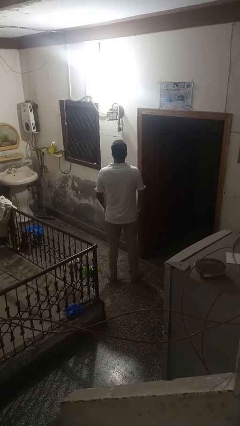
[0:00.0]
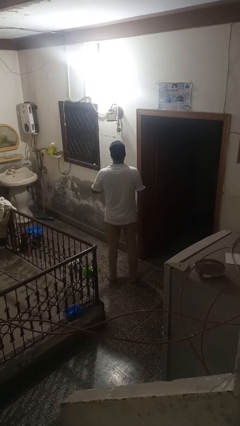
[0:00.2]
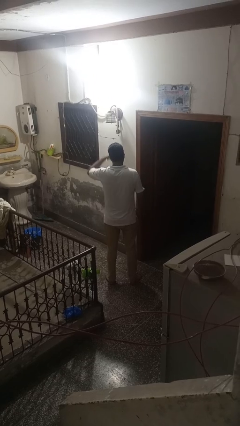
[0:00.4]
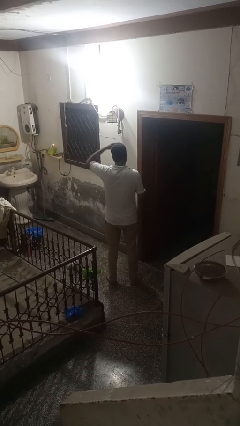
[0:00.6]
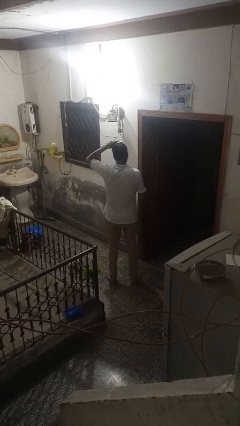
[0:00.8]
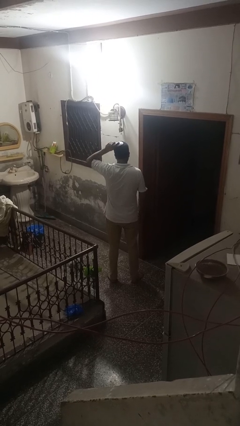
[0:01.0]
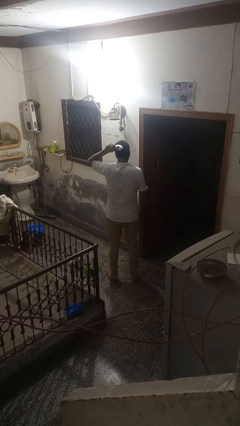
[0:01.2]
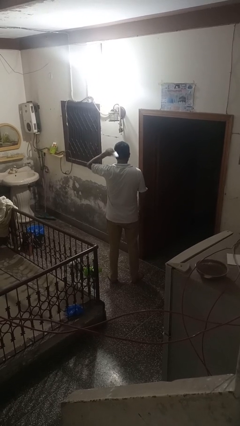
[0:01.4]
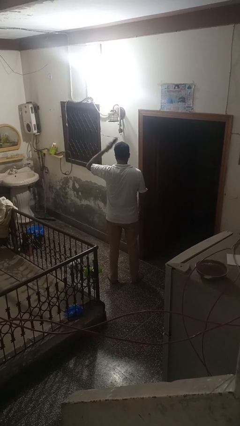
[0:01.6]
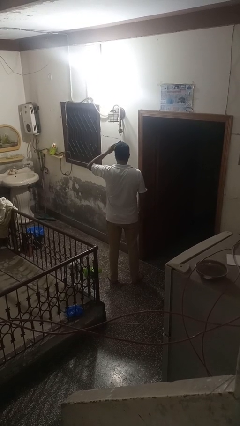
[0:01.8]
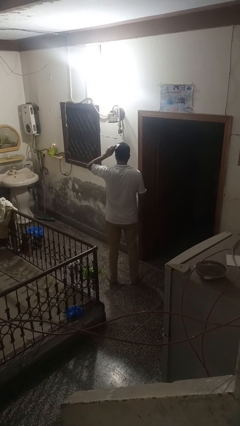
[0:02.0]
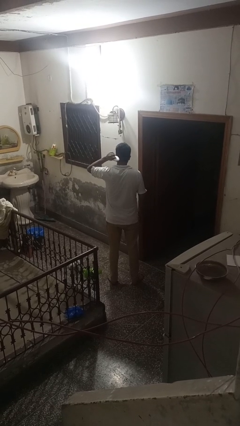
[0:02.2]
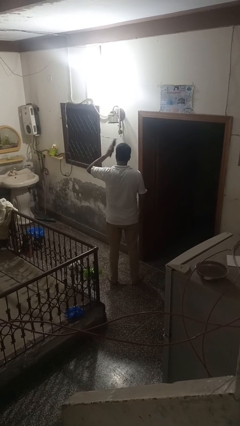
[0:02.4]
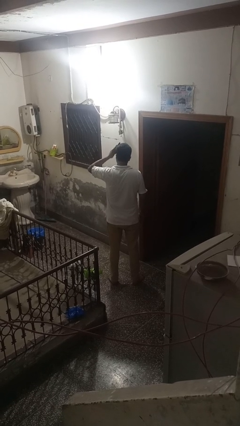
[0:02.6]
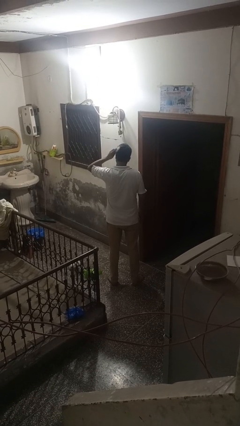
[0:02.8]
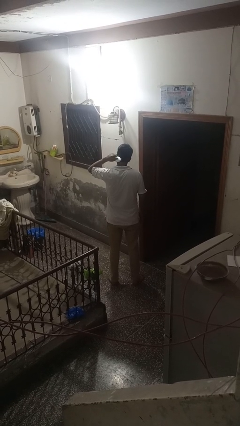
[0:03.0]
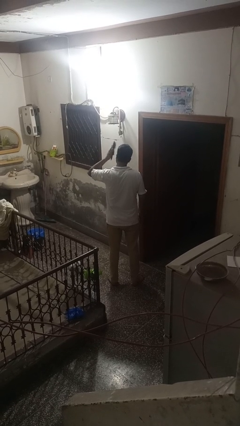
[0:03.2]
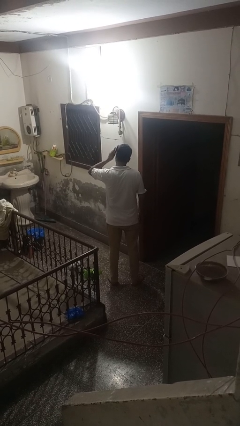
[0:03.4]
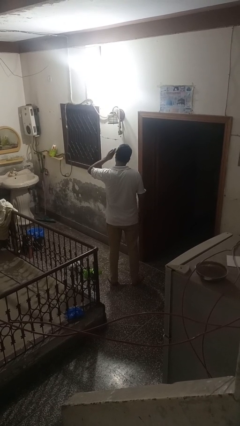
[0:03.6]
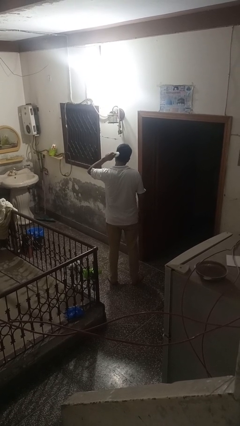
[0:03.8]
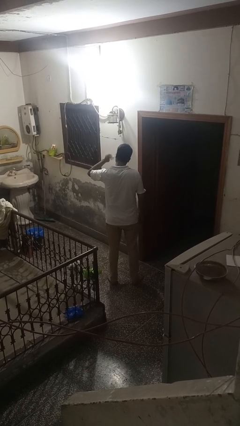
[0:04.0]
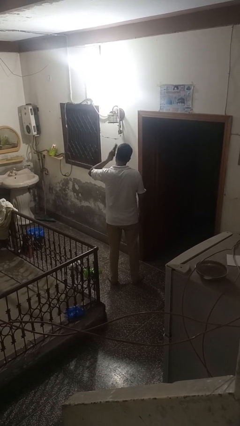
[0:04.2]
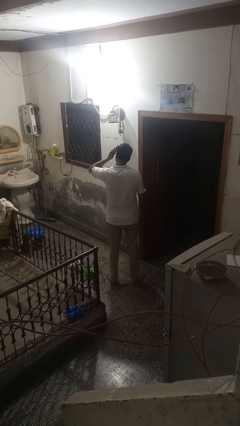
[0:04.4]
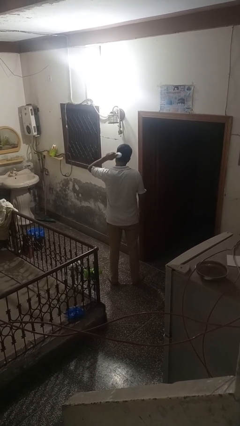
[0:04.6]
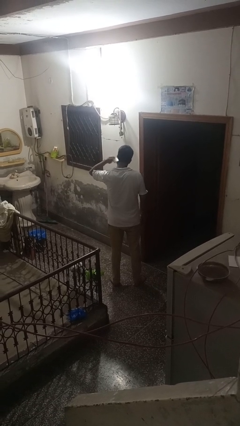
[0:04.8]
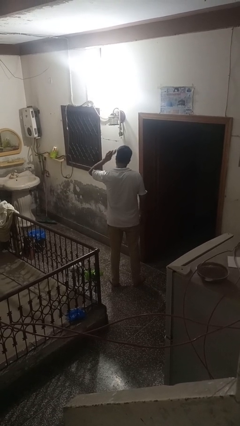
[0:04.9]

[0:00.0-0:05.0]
person brushes hair

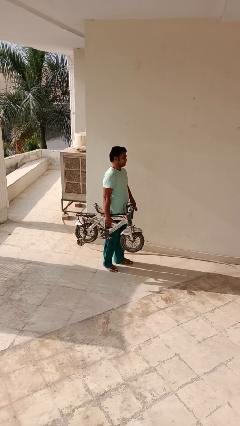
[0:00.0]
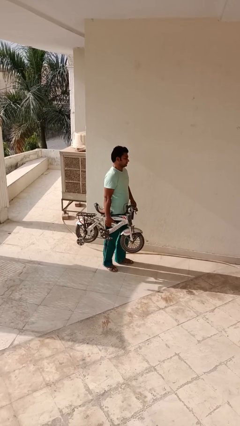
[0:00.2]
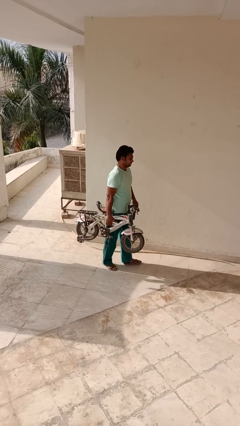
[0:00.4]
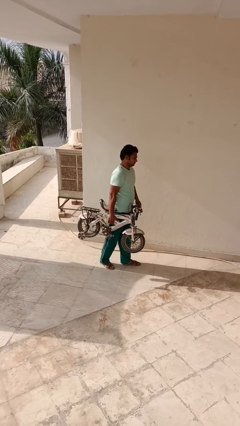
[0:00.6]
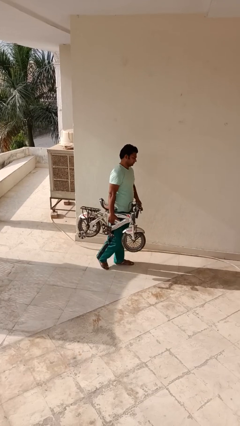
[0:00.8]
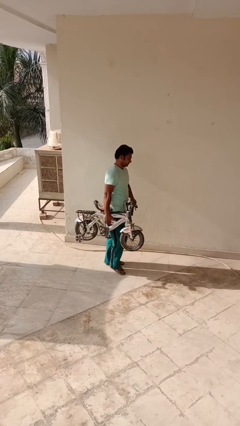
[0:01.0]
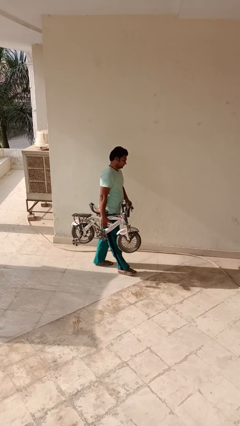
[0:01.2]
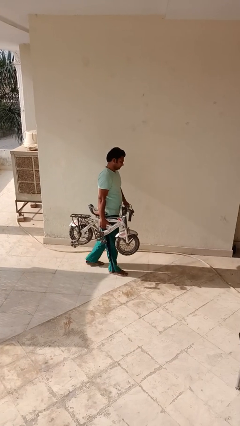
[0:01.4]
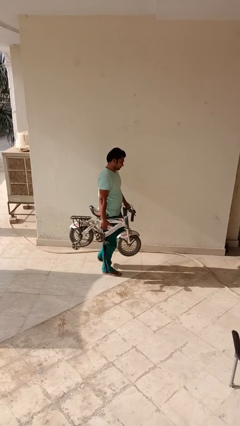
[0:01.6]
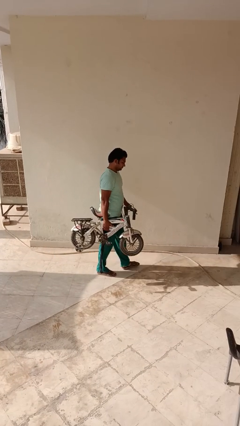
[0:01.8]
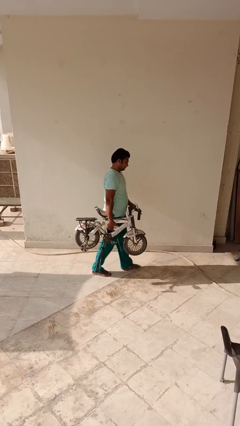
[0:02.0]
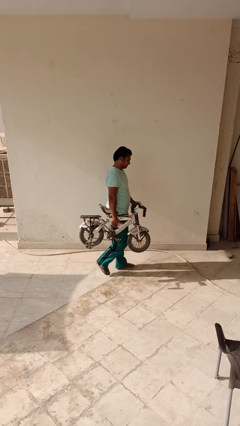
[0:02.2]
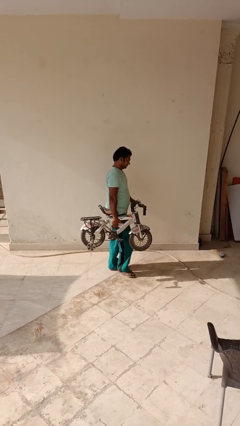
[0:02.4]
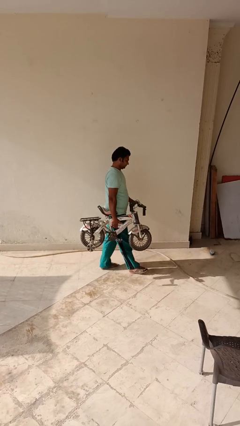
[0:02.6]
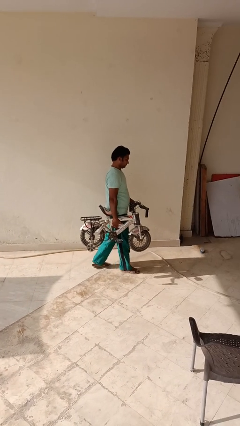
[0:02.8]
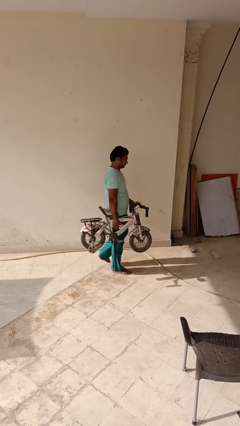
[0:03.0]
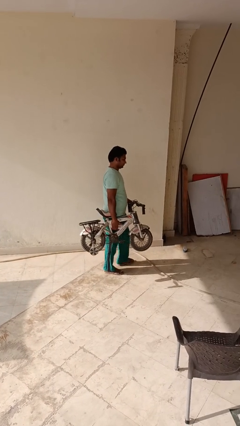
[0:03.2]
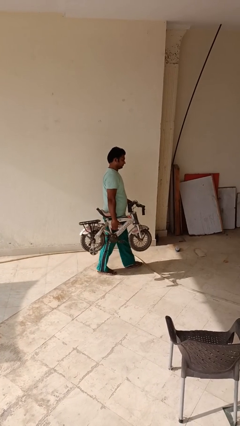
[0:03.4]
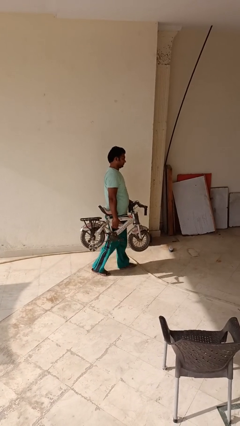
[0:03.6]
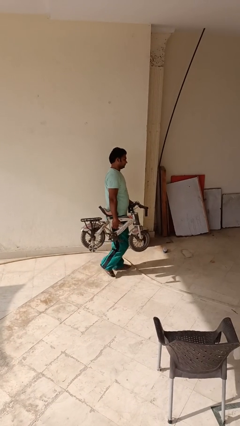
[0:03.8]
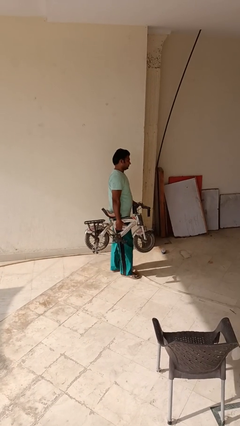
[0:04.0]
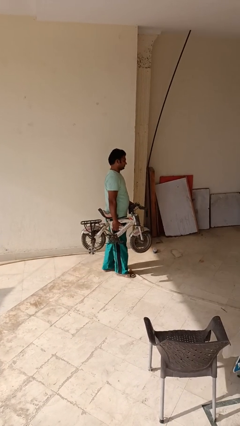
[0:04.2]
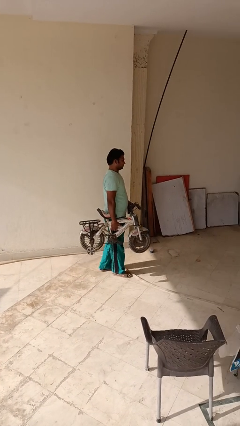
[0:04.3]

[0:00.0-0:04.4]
person carries bicycle

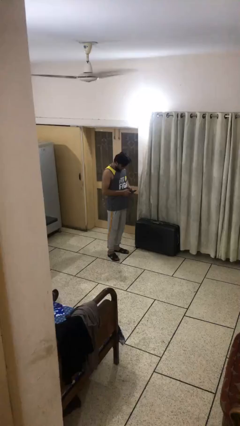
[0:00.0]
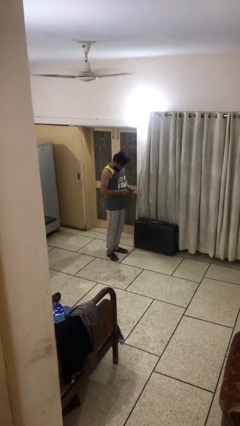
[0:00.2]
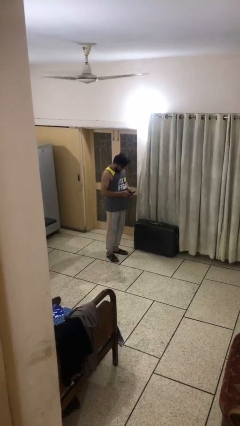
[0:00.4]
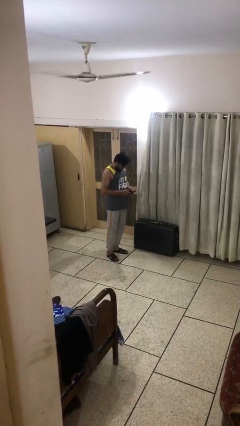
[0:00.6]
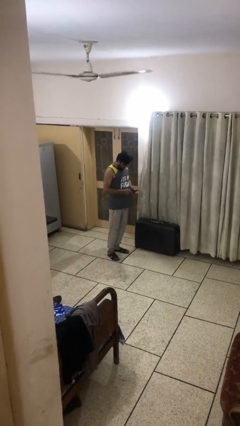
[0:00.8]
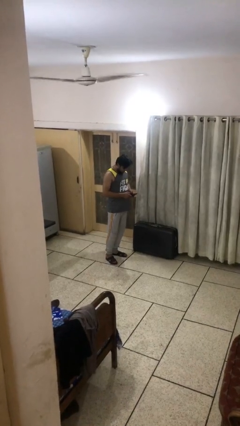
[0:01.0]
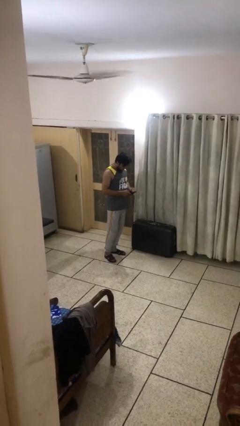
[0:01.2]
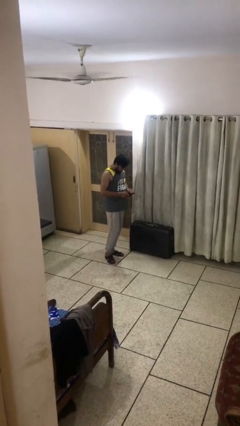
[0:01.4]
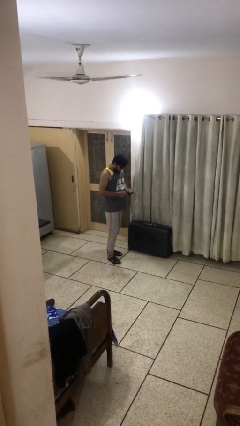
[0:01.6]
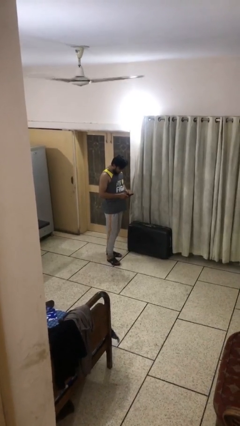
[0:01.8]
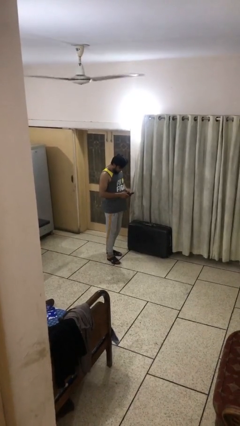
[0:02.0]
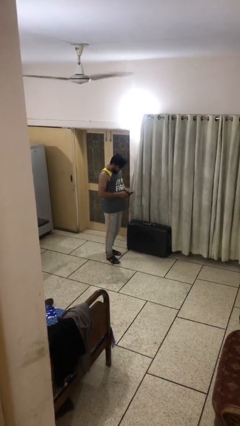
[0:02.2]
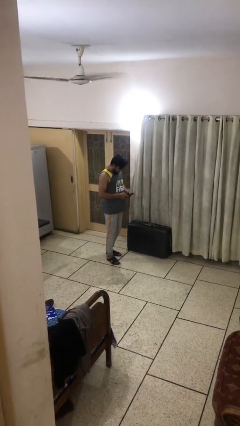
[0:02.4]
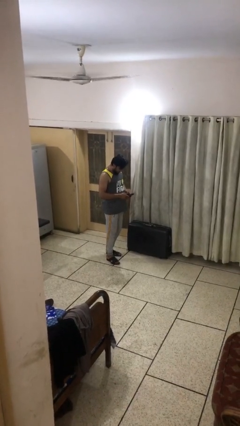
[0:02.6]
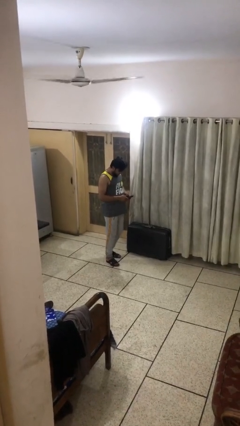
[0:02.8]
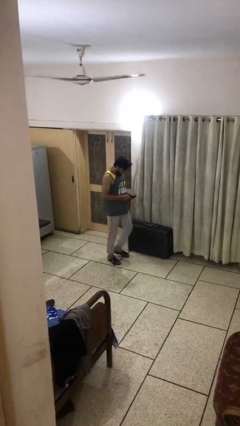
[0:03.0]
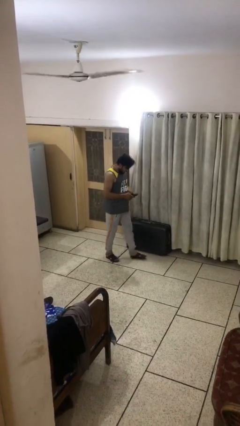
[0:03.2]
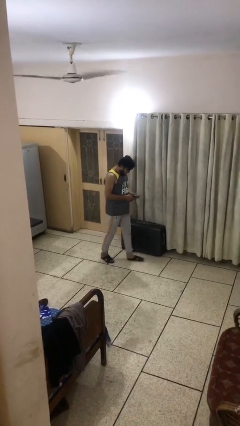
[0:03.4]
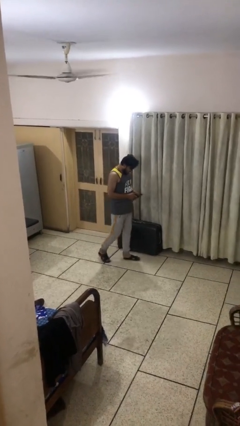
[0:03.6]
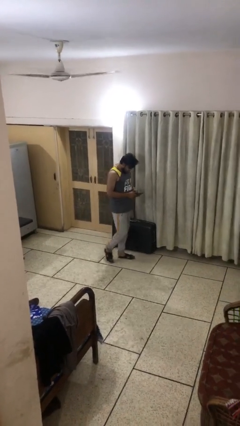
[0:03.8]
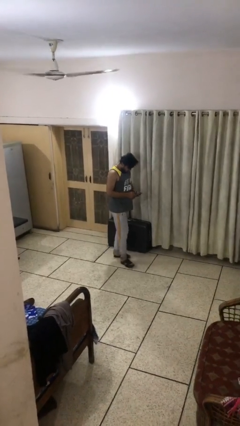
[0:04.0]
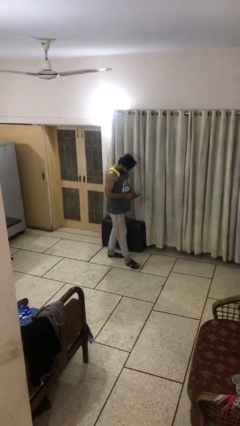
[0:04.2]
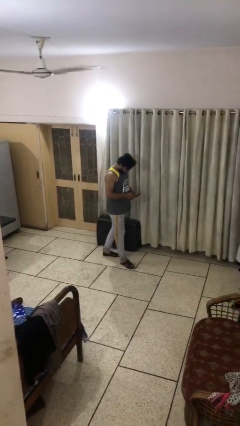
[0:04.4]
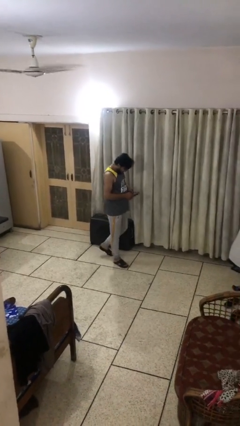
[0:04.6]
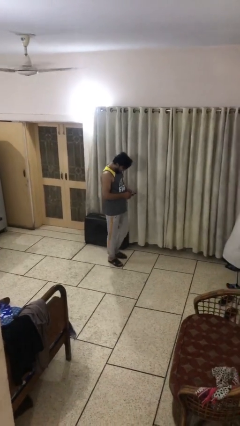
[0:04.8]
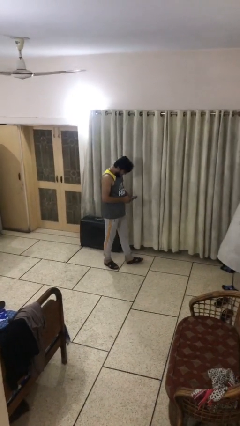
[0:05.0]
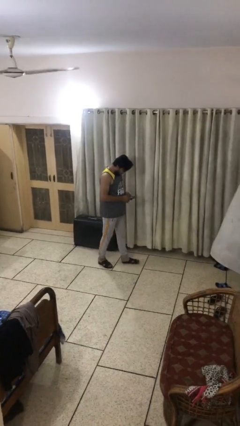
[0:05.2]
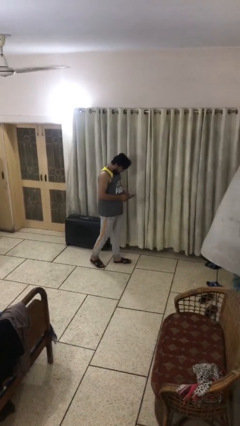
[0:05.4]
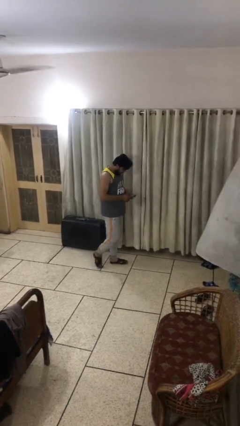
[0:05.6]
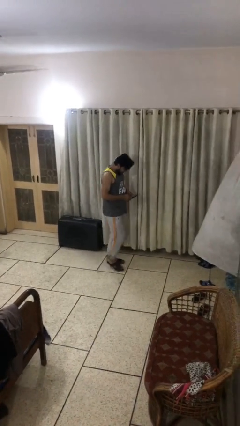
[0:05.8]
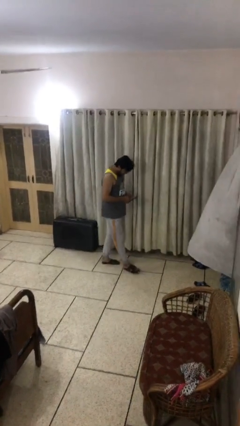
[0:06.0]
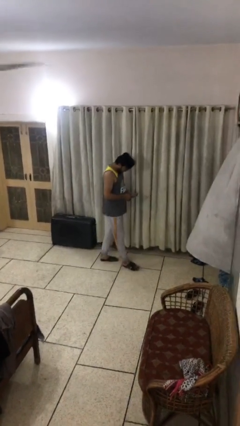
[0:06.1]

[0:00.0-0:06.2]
person texts on phone

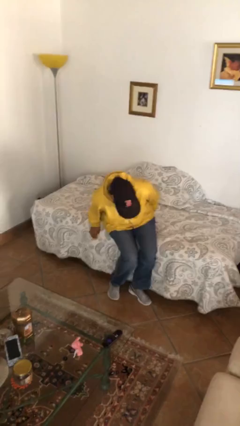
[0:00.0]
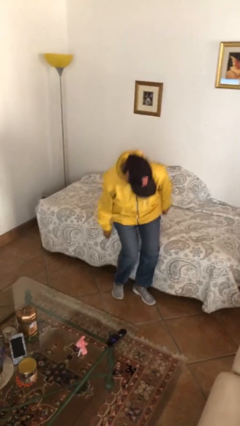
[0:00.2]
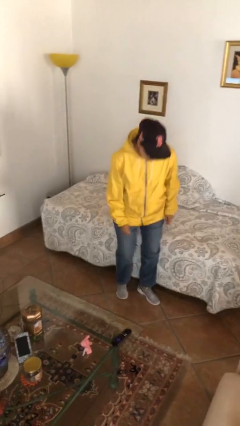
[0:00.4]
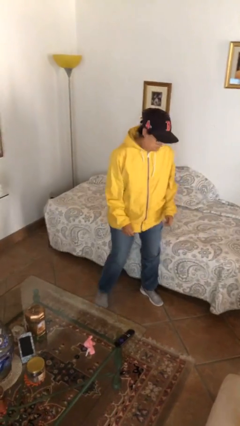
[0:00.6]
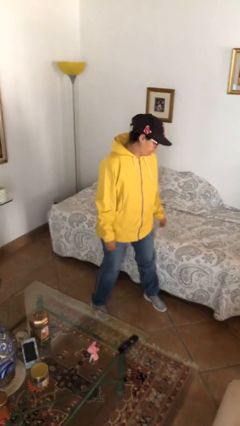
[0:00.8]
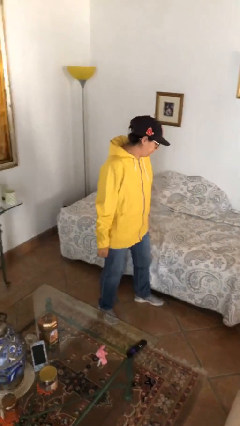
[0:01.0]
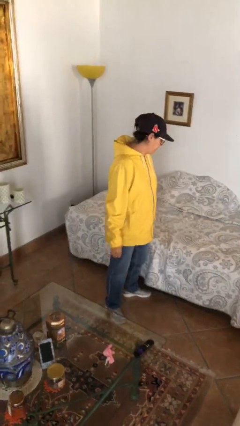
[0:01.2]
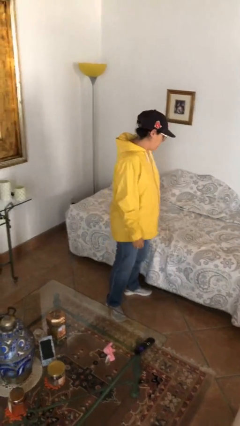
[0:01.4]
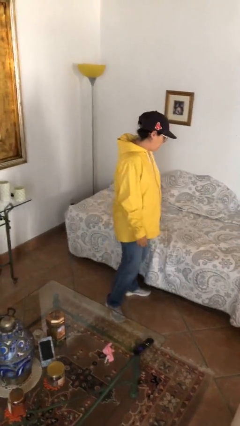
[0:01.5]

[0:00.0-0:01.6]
person stands up

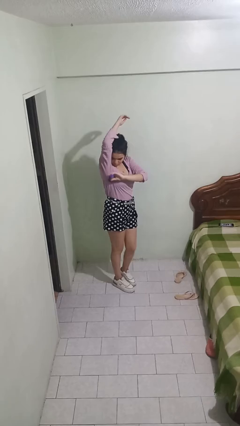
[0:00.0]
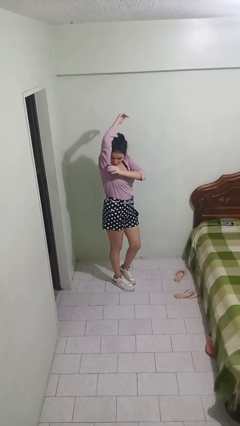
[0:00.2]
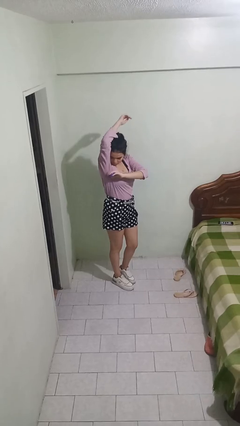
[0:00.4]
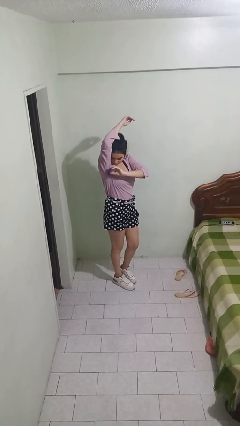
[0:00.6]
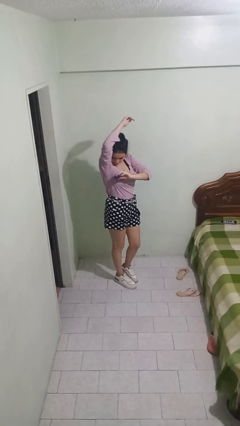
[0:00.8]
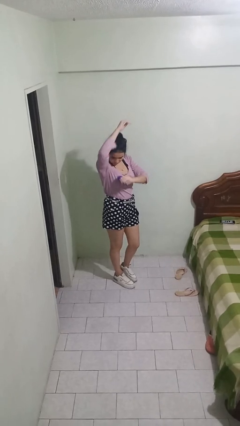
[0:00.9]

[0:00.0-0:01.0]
person applies deodorant
